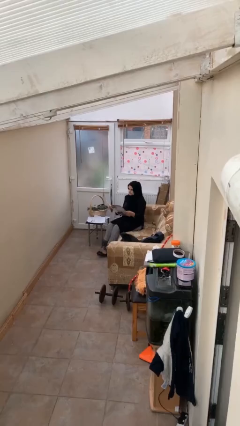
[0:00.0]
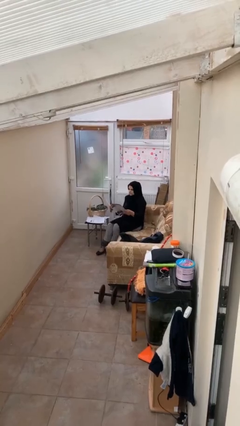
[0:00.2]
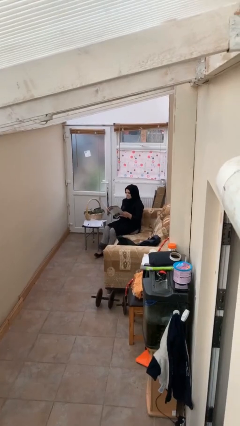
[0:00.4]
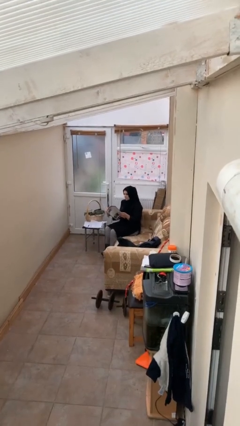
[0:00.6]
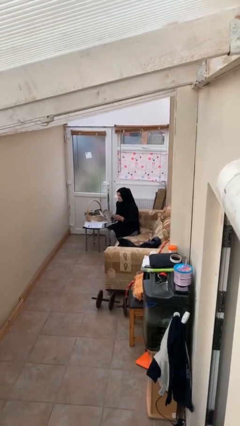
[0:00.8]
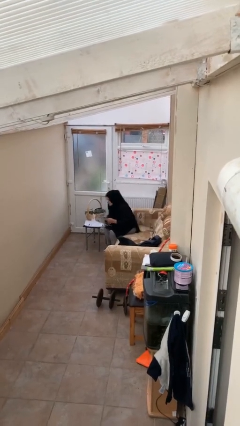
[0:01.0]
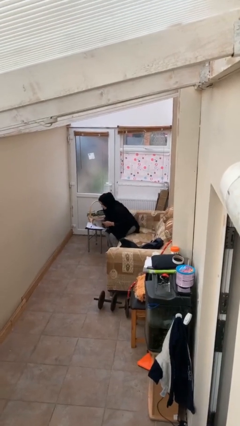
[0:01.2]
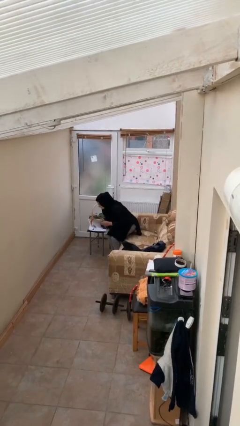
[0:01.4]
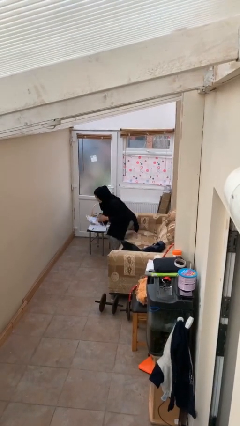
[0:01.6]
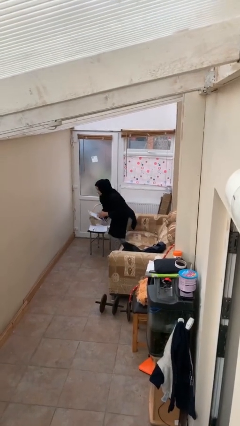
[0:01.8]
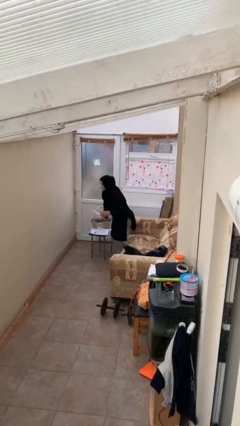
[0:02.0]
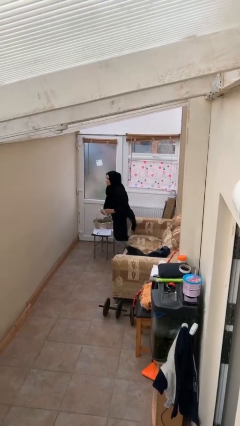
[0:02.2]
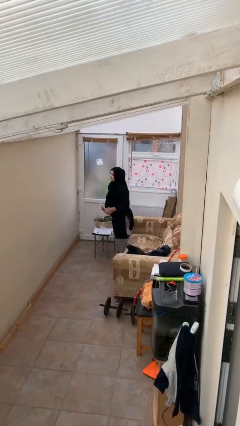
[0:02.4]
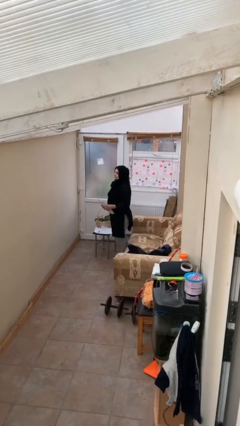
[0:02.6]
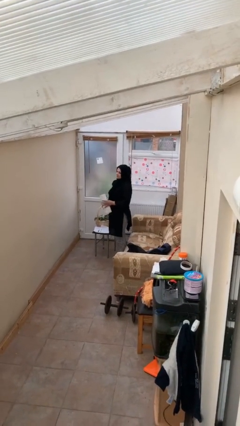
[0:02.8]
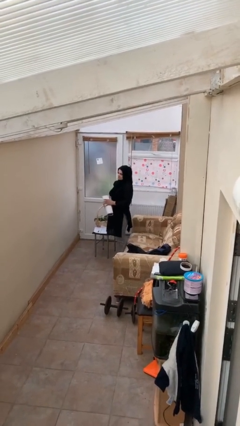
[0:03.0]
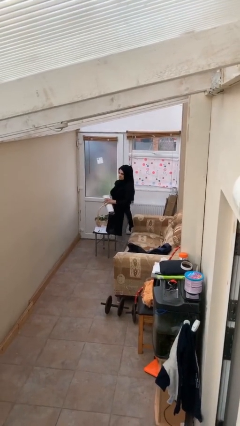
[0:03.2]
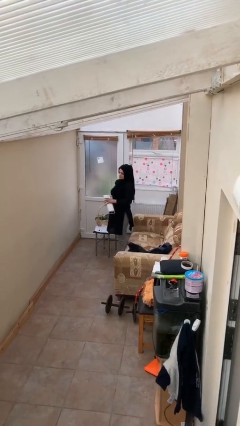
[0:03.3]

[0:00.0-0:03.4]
person stands up

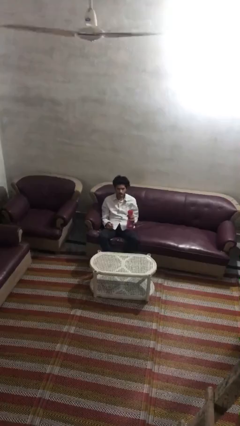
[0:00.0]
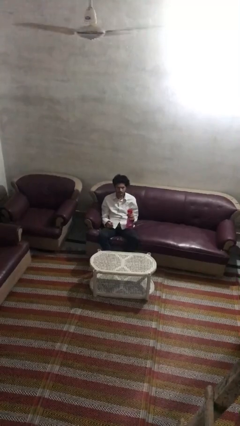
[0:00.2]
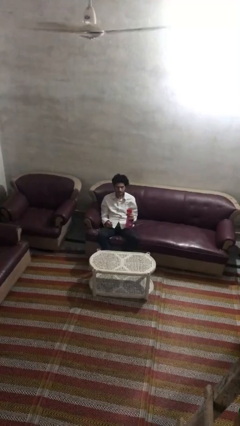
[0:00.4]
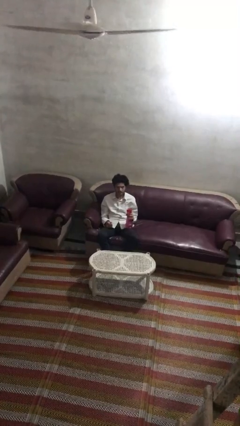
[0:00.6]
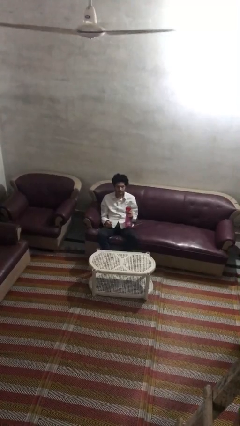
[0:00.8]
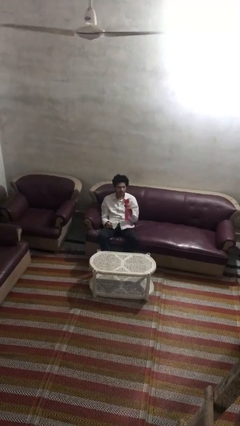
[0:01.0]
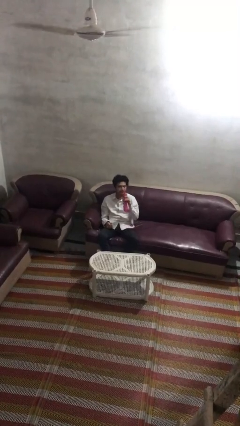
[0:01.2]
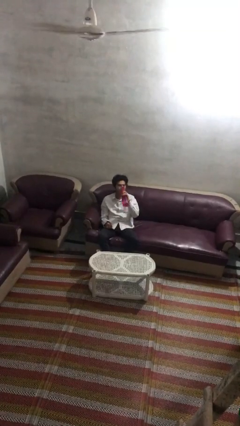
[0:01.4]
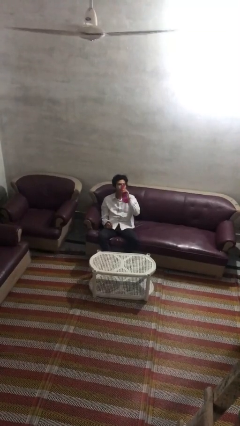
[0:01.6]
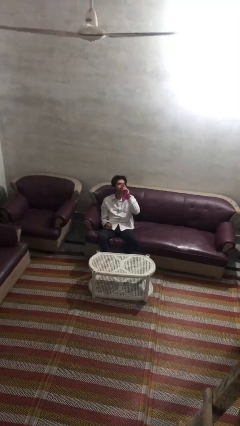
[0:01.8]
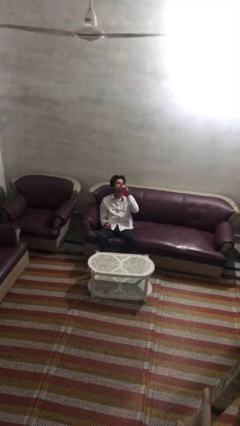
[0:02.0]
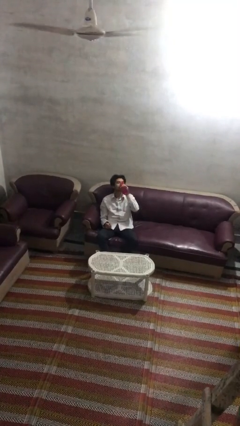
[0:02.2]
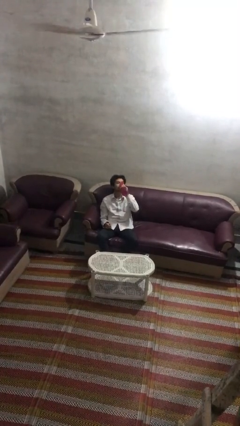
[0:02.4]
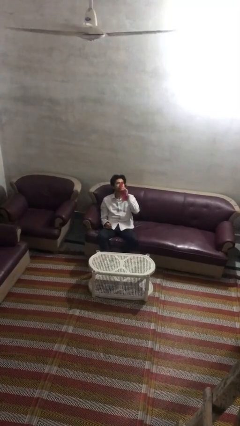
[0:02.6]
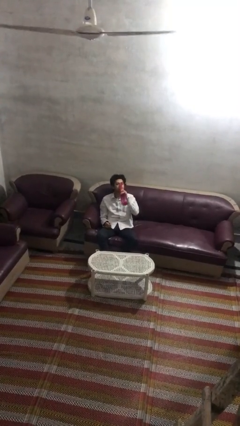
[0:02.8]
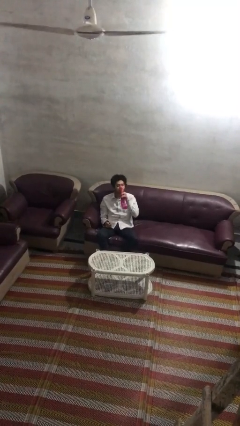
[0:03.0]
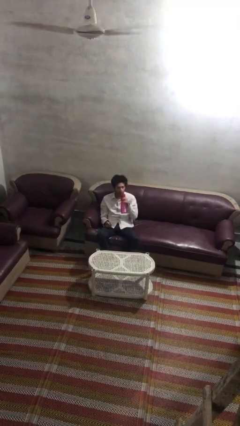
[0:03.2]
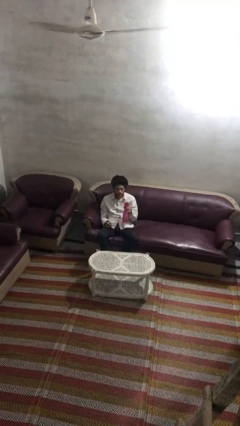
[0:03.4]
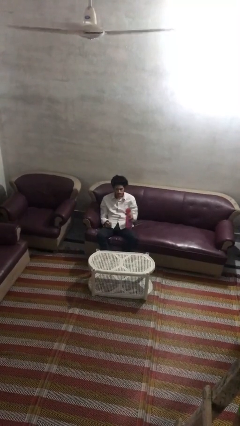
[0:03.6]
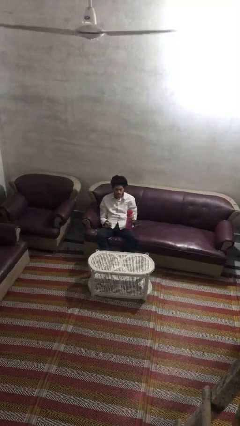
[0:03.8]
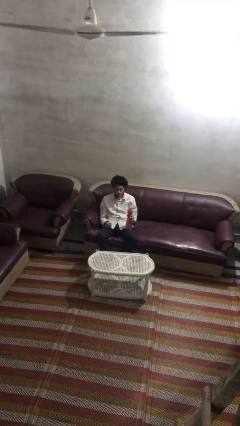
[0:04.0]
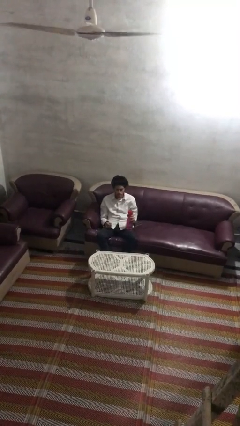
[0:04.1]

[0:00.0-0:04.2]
person drinks from bottle

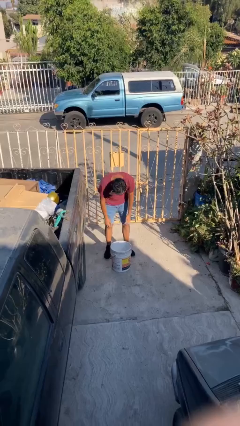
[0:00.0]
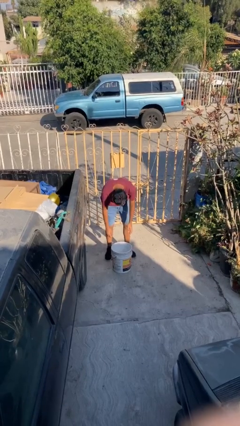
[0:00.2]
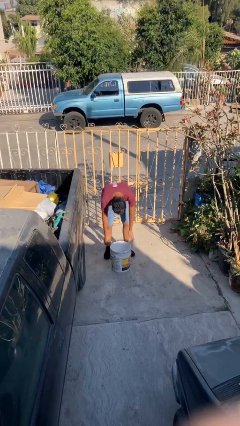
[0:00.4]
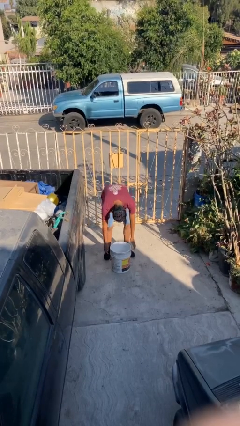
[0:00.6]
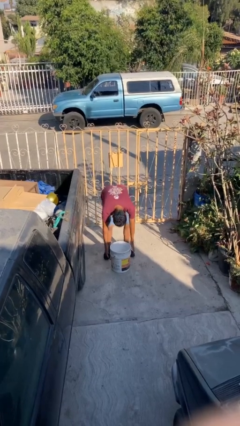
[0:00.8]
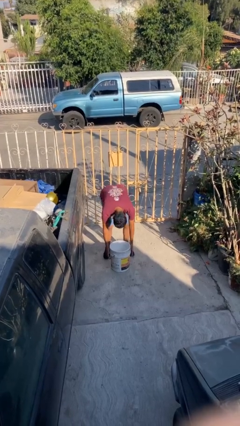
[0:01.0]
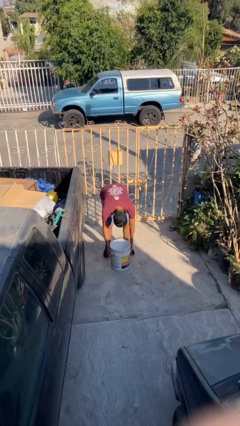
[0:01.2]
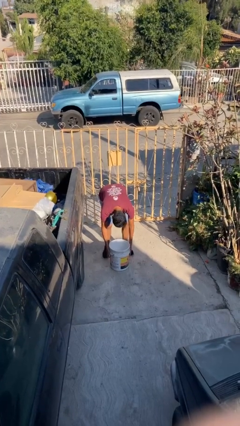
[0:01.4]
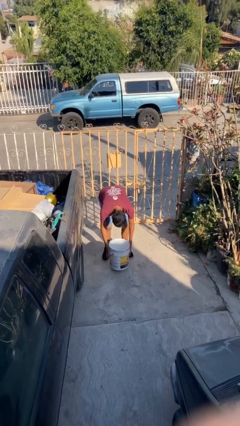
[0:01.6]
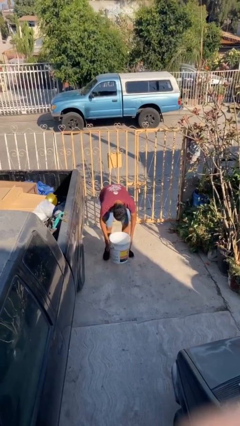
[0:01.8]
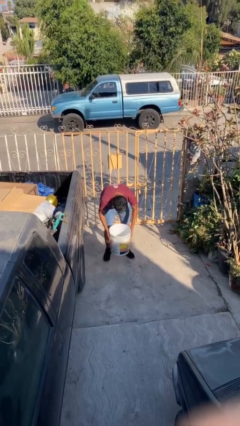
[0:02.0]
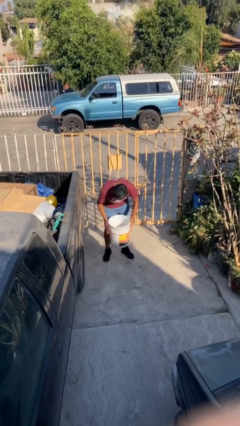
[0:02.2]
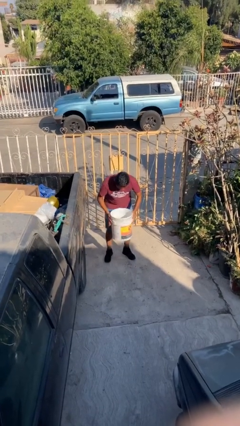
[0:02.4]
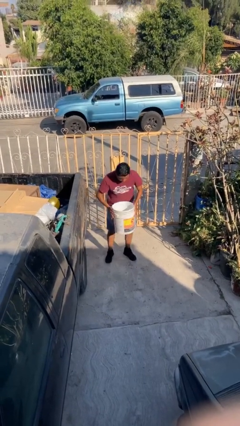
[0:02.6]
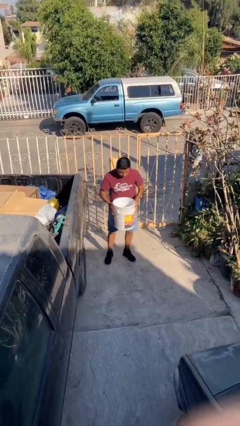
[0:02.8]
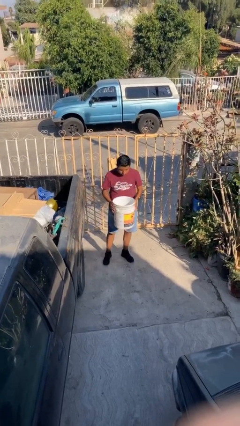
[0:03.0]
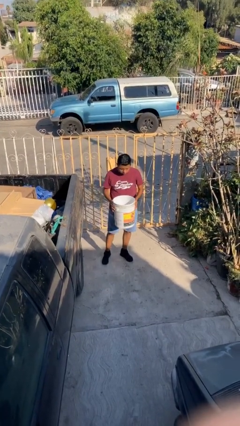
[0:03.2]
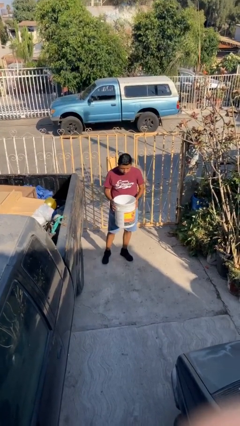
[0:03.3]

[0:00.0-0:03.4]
person picks up object from floor

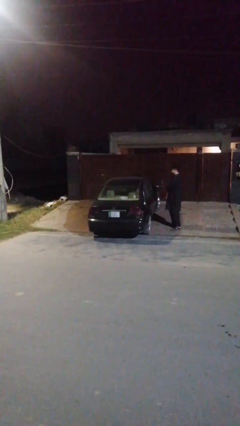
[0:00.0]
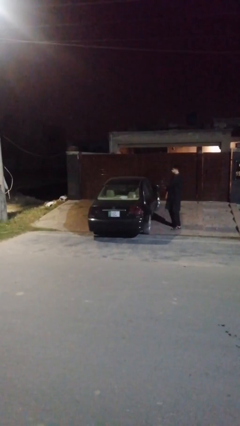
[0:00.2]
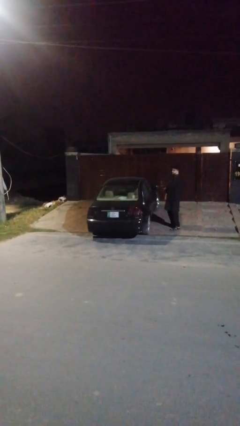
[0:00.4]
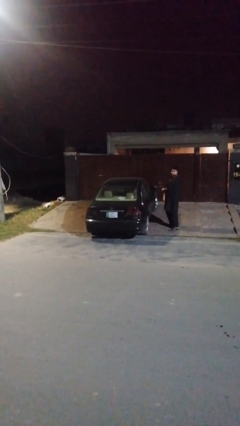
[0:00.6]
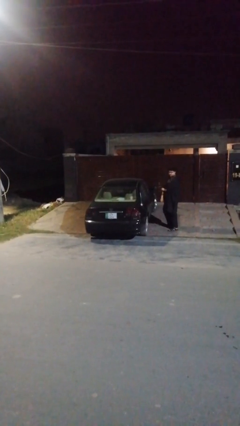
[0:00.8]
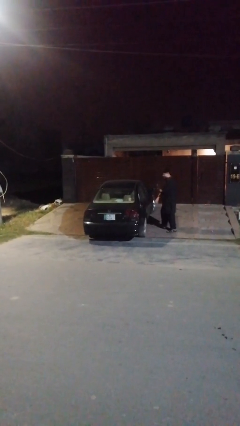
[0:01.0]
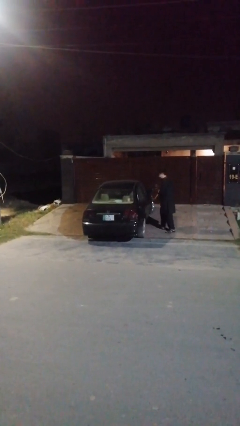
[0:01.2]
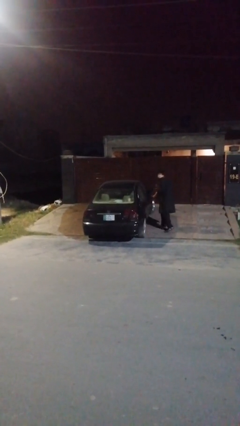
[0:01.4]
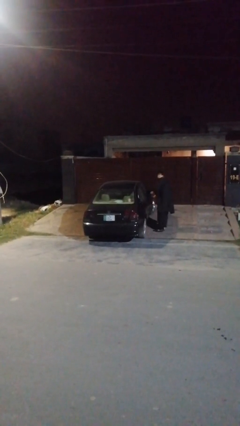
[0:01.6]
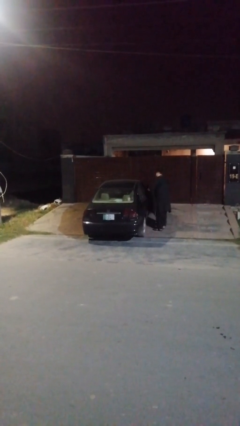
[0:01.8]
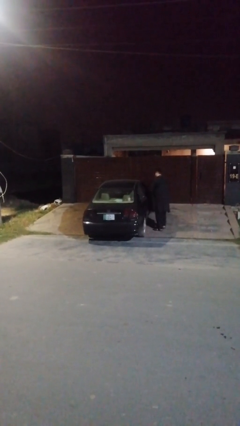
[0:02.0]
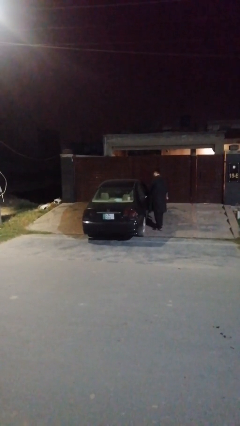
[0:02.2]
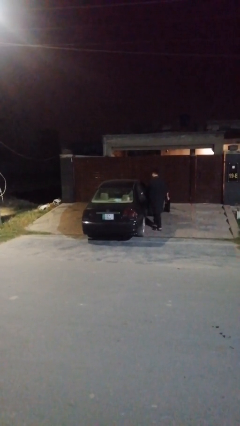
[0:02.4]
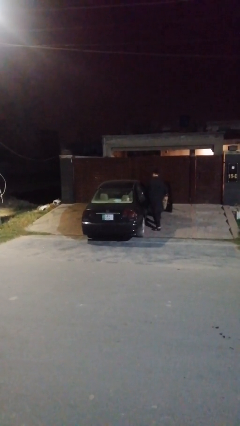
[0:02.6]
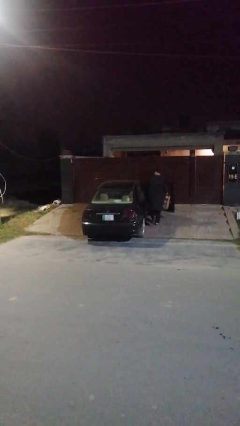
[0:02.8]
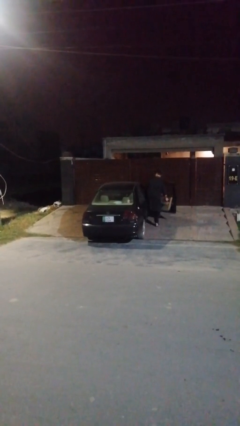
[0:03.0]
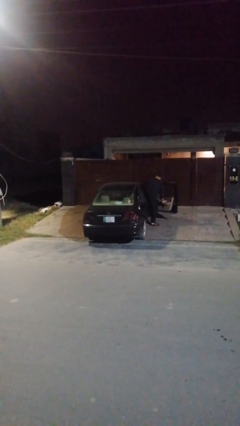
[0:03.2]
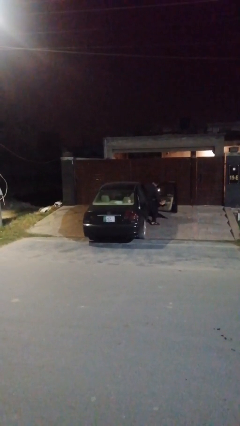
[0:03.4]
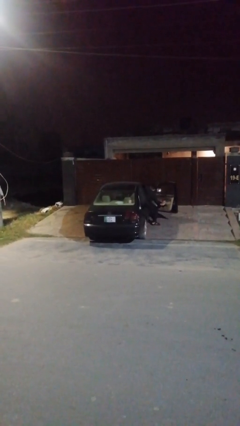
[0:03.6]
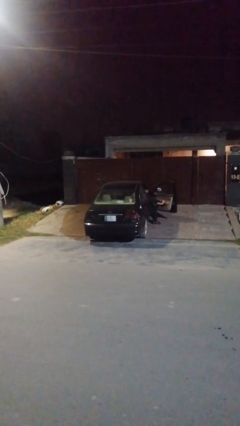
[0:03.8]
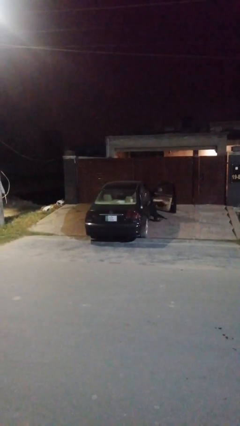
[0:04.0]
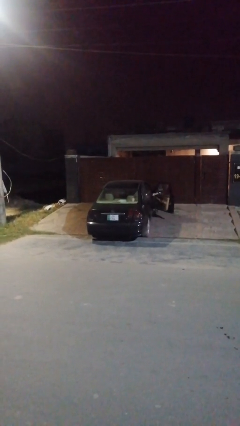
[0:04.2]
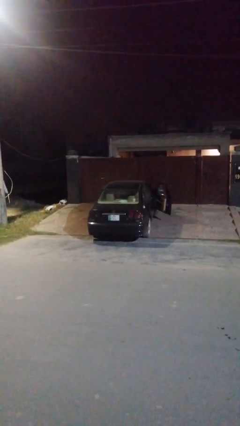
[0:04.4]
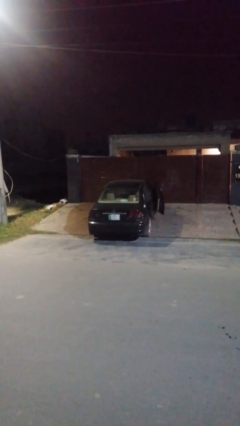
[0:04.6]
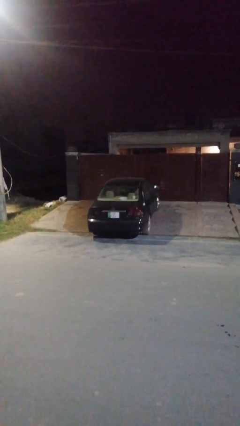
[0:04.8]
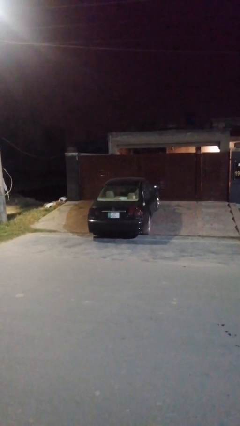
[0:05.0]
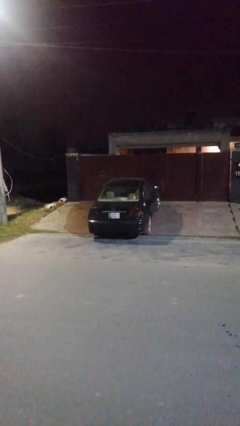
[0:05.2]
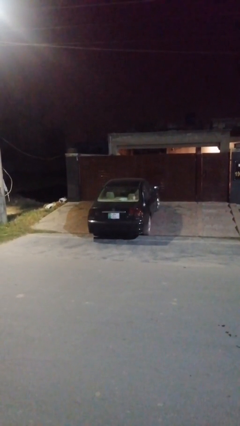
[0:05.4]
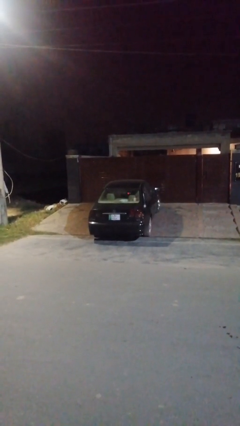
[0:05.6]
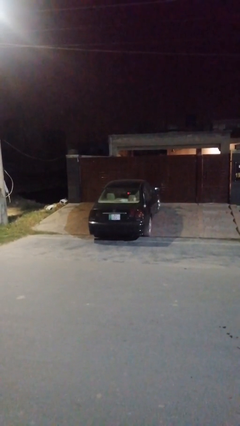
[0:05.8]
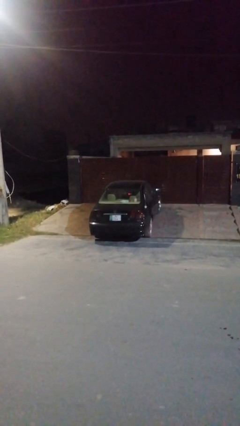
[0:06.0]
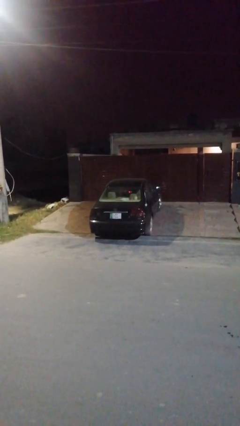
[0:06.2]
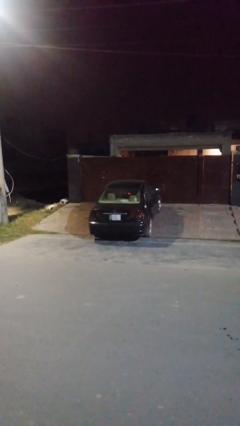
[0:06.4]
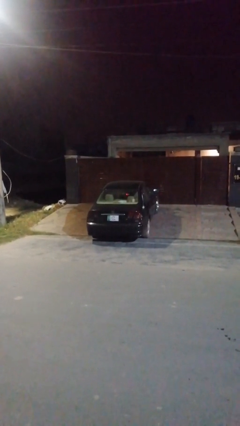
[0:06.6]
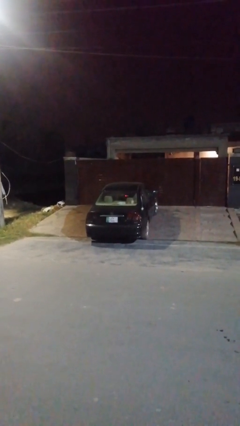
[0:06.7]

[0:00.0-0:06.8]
car picks up person
